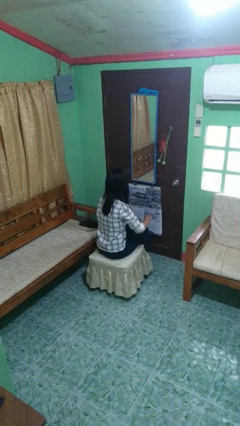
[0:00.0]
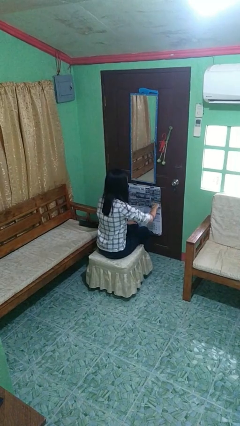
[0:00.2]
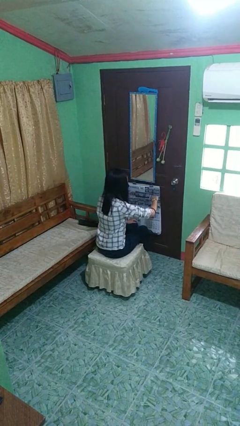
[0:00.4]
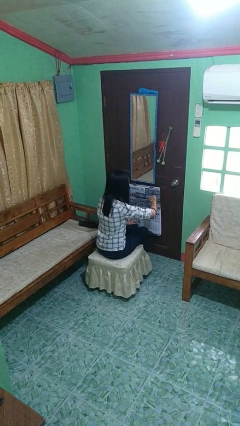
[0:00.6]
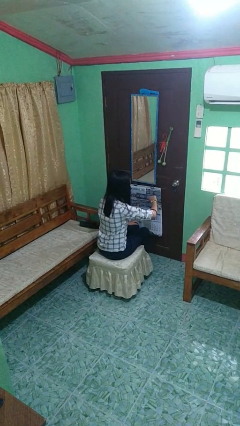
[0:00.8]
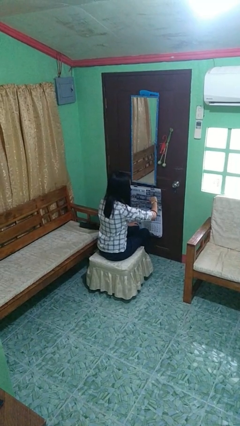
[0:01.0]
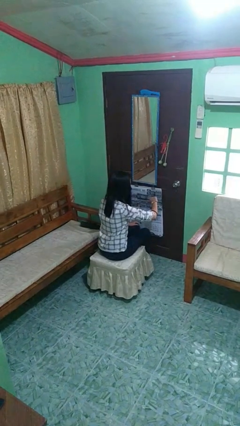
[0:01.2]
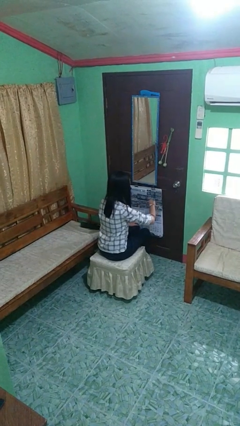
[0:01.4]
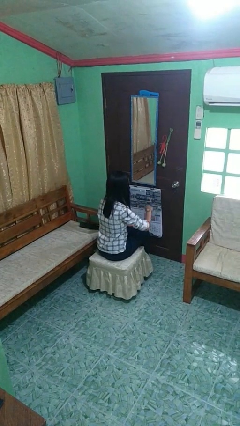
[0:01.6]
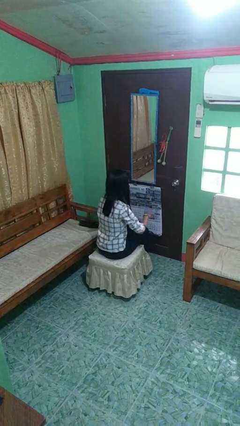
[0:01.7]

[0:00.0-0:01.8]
person looks at wristwatch

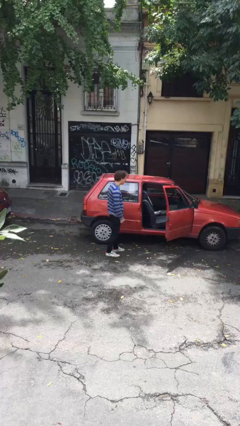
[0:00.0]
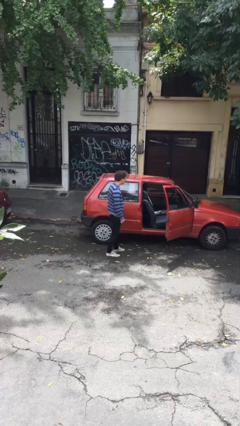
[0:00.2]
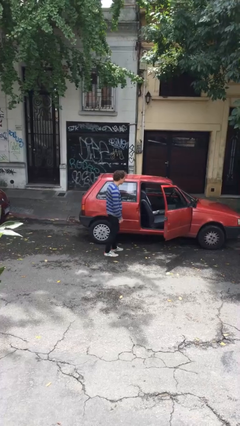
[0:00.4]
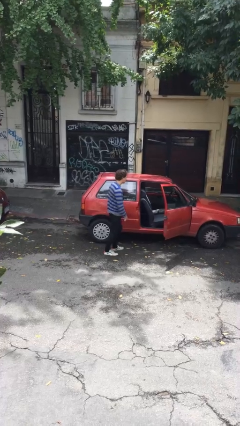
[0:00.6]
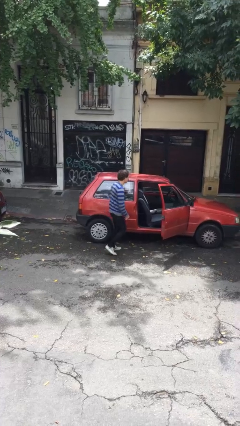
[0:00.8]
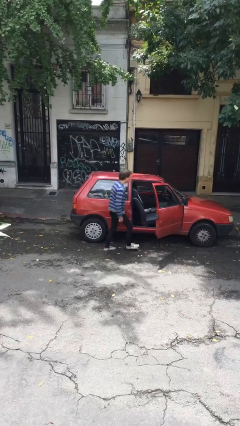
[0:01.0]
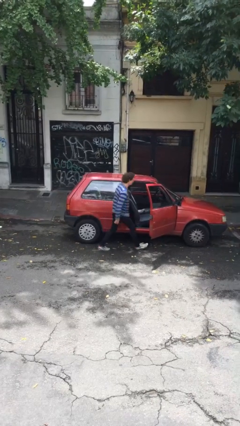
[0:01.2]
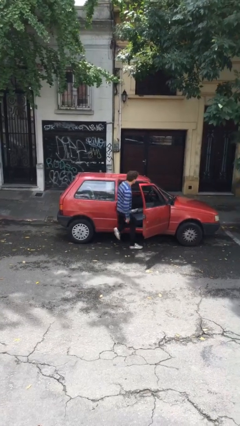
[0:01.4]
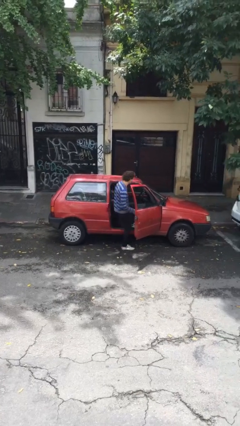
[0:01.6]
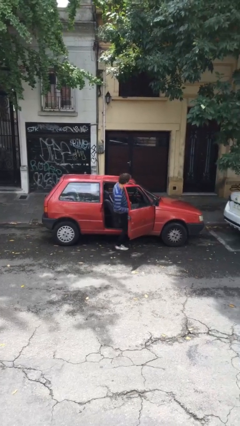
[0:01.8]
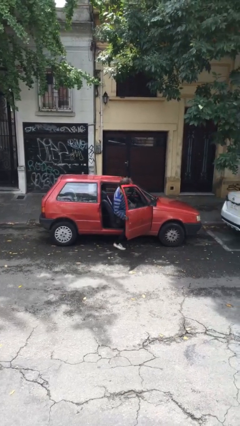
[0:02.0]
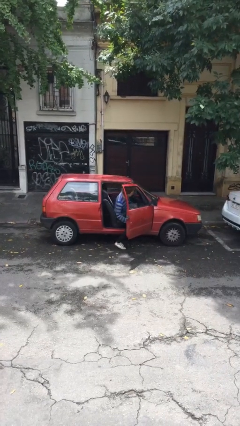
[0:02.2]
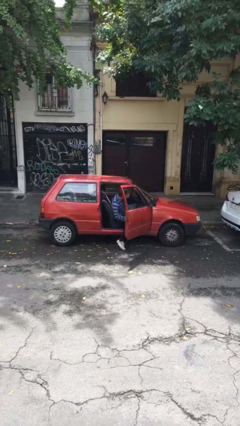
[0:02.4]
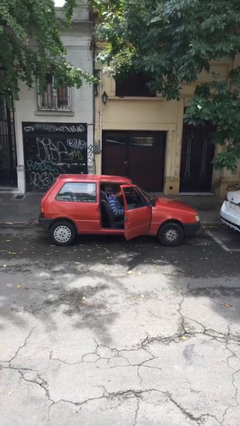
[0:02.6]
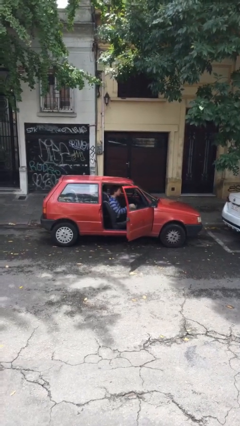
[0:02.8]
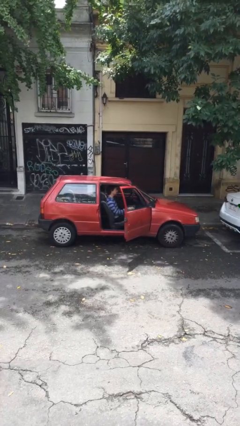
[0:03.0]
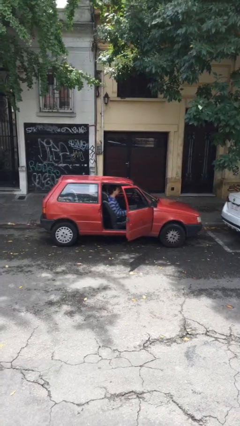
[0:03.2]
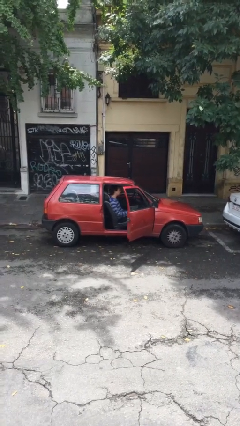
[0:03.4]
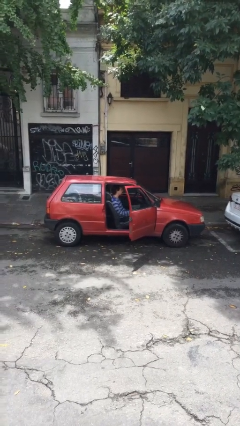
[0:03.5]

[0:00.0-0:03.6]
person enters car

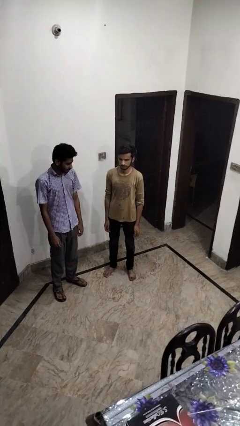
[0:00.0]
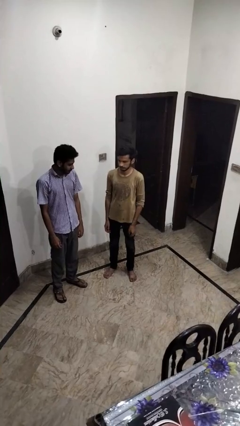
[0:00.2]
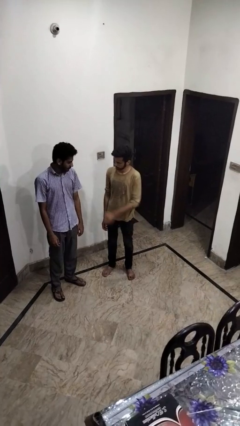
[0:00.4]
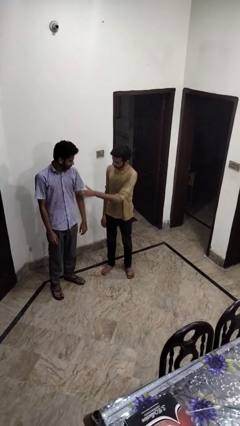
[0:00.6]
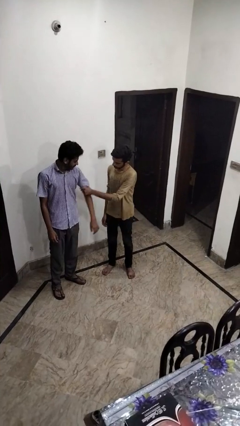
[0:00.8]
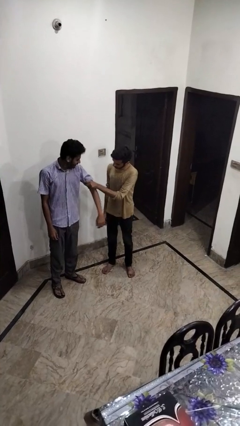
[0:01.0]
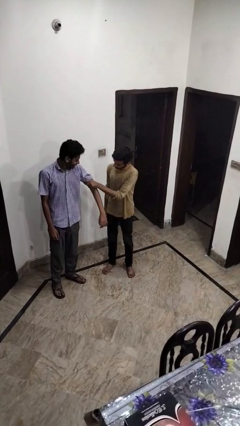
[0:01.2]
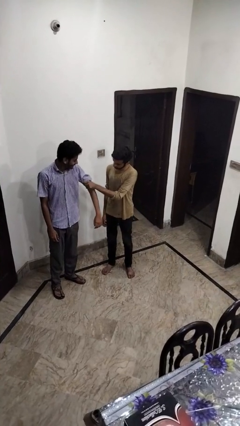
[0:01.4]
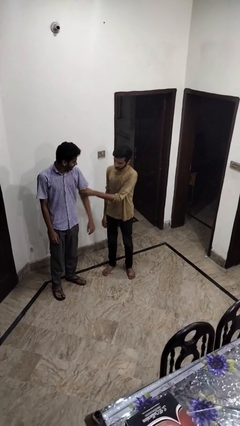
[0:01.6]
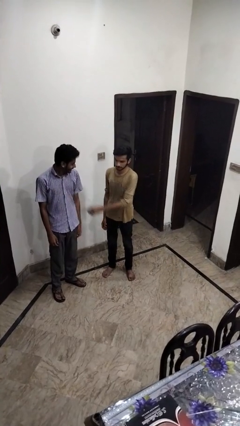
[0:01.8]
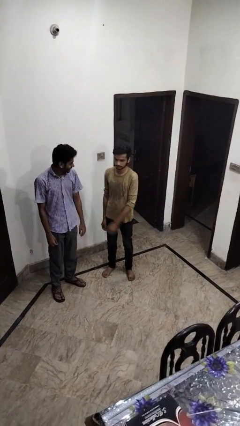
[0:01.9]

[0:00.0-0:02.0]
person grabs person by bicep

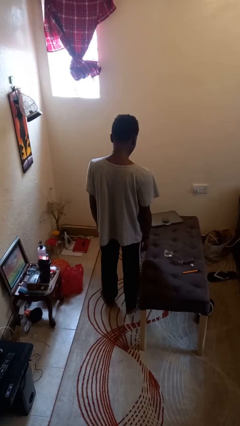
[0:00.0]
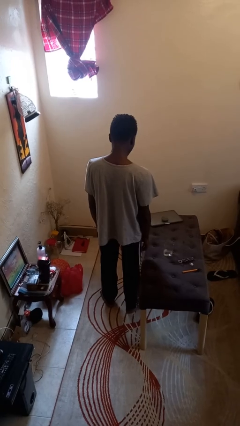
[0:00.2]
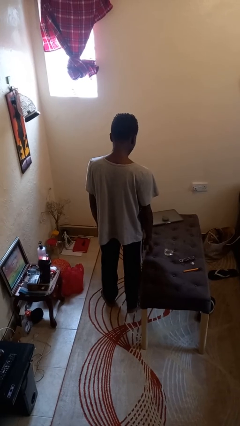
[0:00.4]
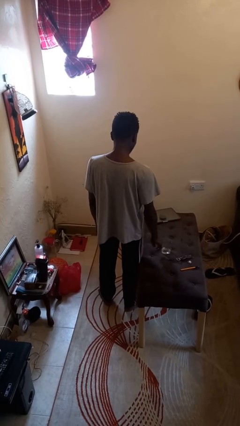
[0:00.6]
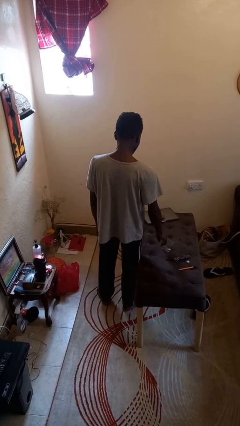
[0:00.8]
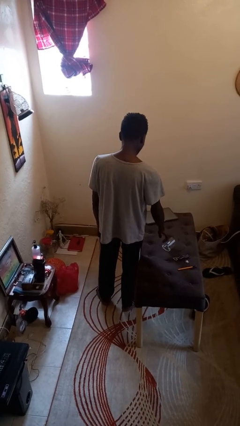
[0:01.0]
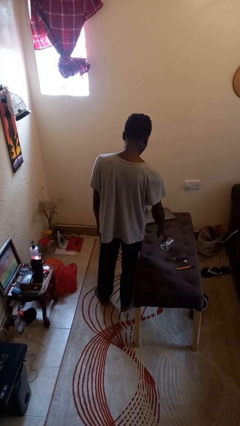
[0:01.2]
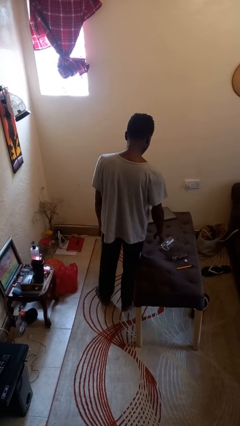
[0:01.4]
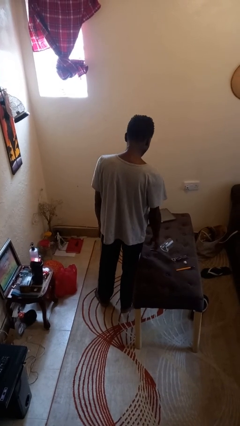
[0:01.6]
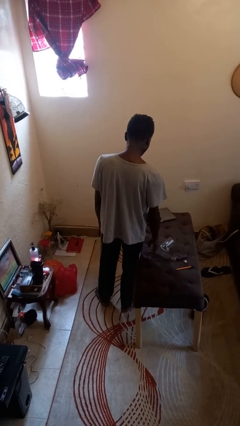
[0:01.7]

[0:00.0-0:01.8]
person knocks over glass

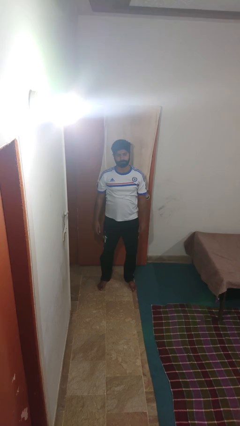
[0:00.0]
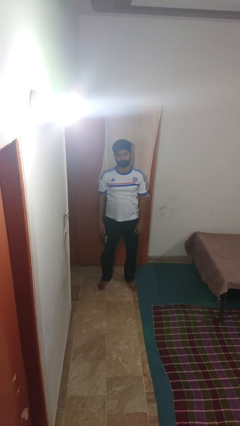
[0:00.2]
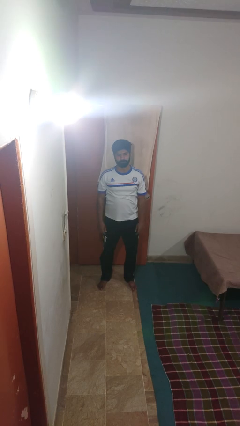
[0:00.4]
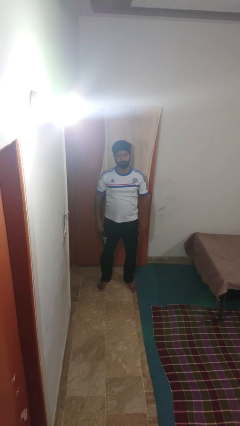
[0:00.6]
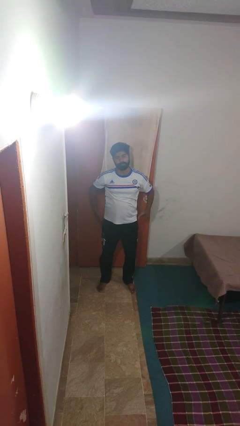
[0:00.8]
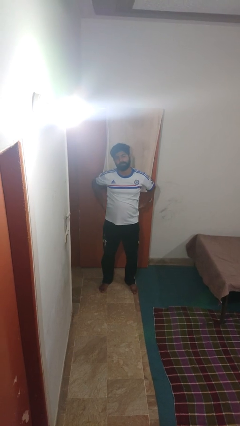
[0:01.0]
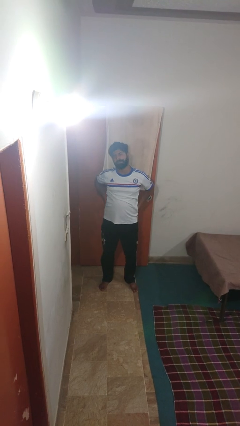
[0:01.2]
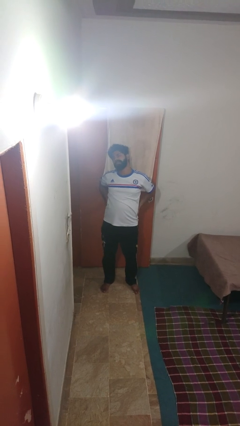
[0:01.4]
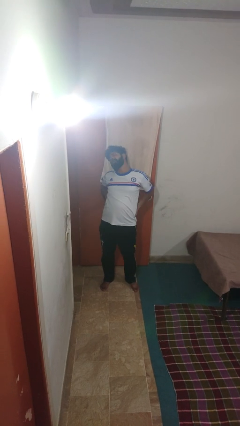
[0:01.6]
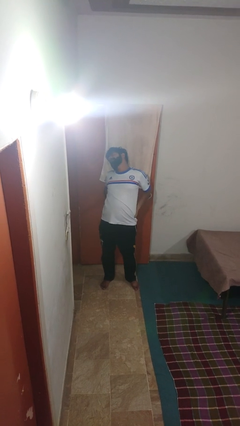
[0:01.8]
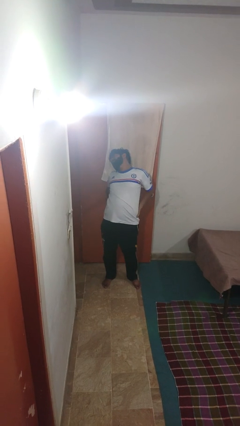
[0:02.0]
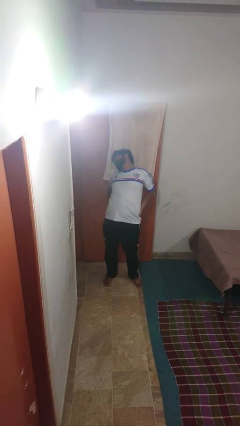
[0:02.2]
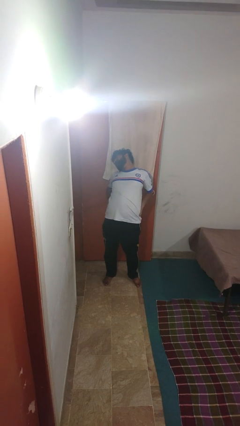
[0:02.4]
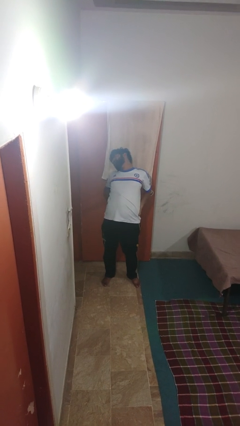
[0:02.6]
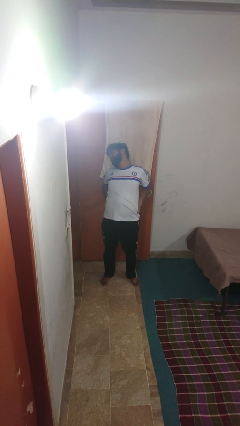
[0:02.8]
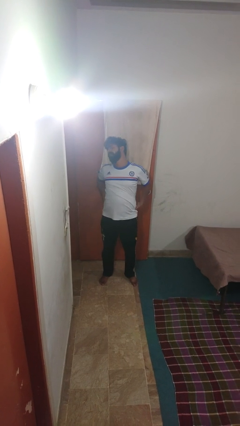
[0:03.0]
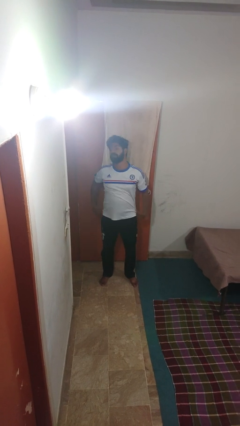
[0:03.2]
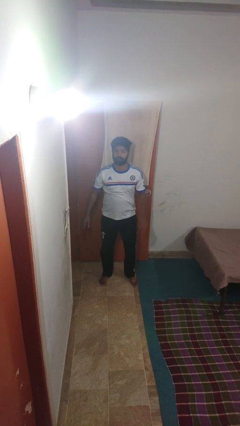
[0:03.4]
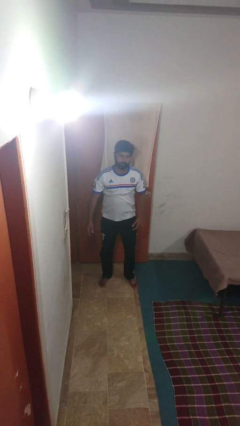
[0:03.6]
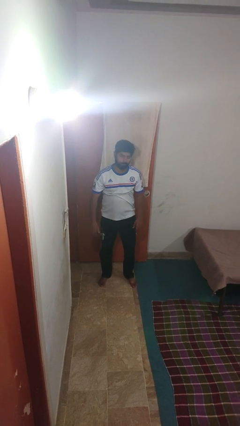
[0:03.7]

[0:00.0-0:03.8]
person stretches back

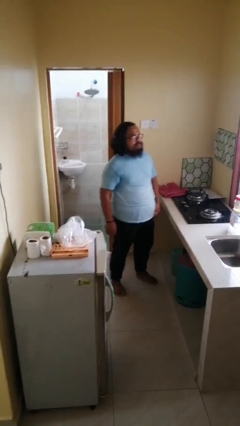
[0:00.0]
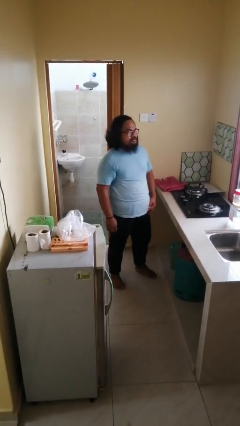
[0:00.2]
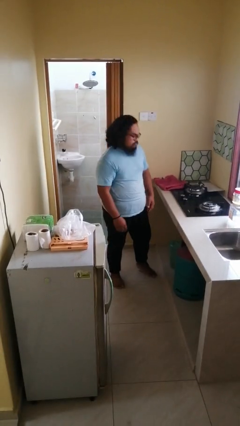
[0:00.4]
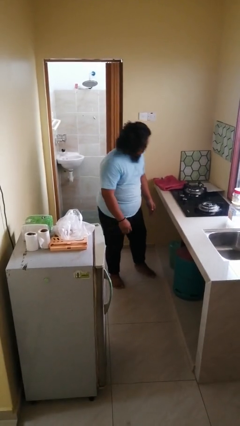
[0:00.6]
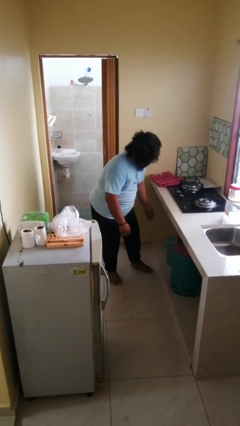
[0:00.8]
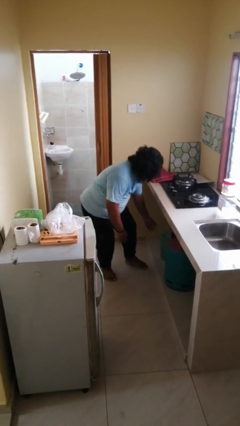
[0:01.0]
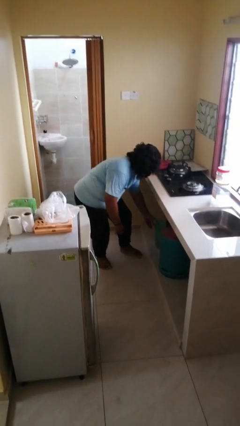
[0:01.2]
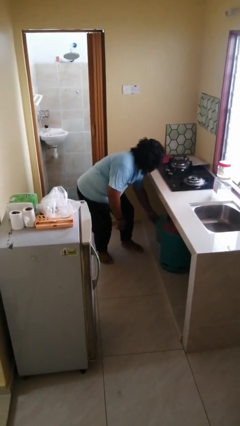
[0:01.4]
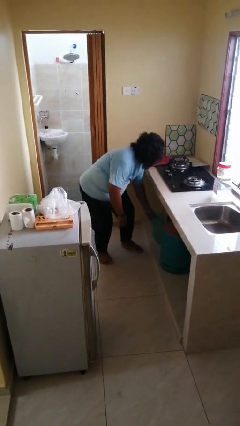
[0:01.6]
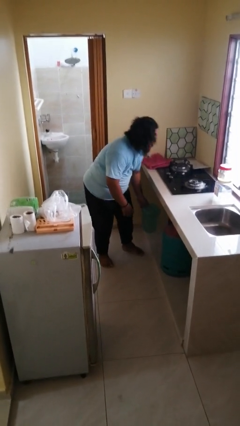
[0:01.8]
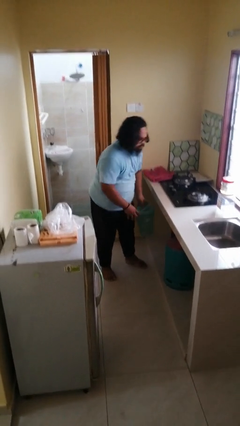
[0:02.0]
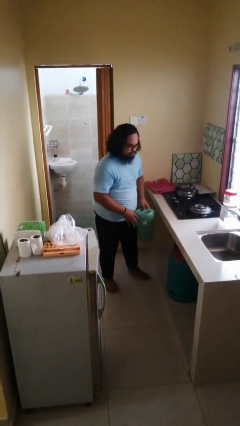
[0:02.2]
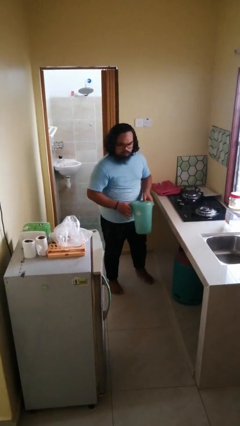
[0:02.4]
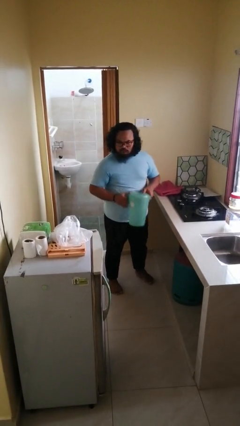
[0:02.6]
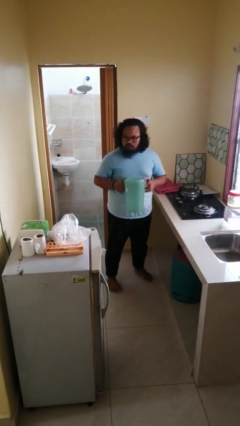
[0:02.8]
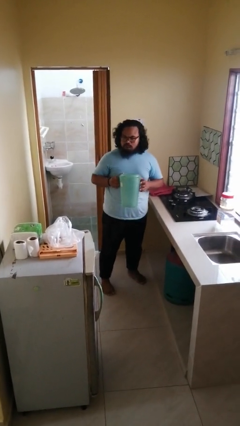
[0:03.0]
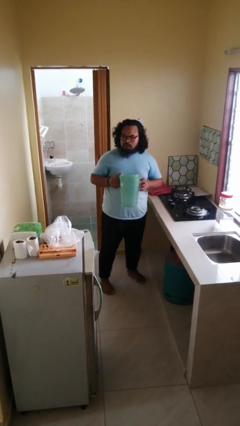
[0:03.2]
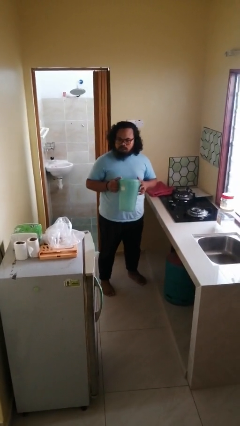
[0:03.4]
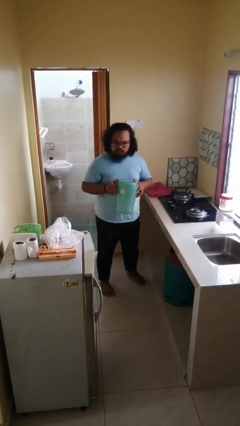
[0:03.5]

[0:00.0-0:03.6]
person picks up object from cabinet

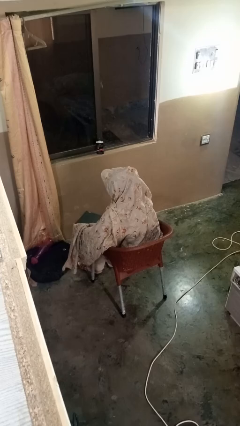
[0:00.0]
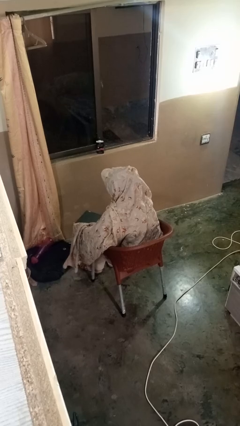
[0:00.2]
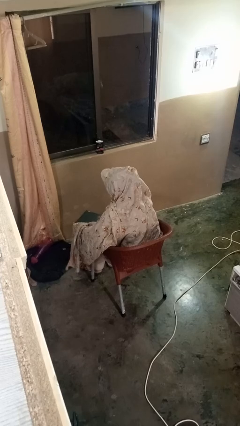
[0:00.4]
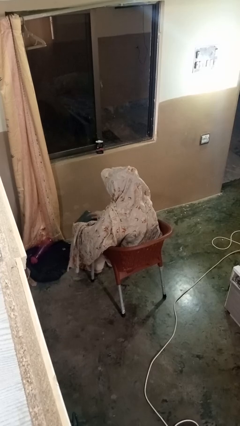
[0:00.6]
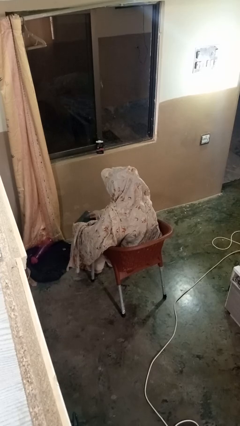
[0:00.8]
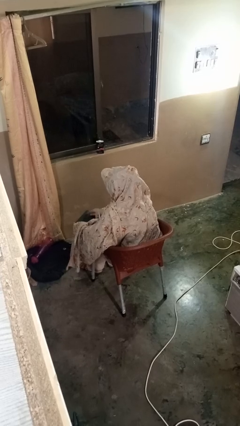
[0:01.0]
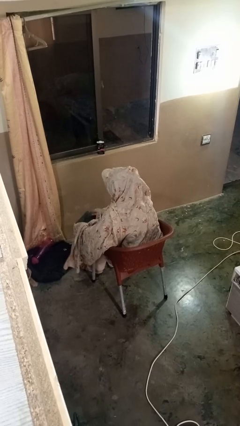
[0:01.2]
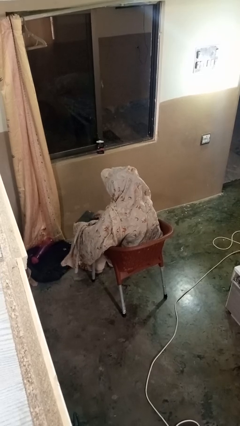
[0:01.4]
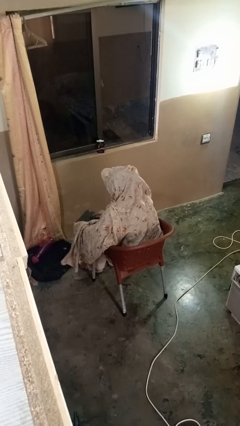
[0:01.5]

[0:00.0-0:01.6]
person interacts with tablet
